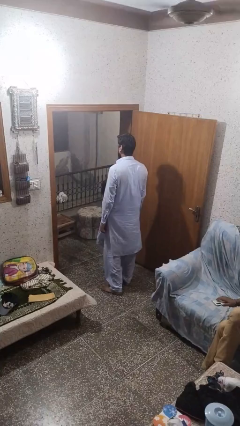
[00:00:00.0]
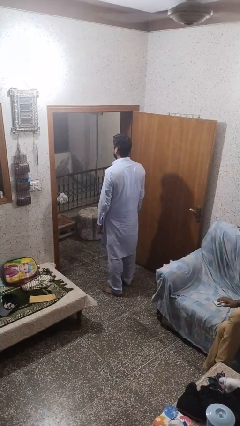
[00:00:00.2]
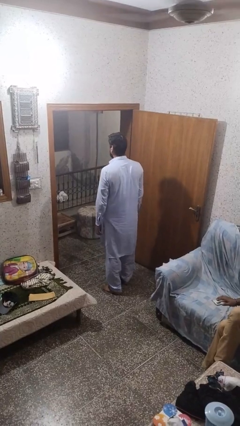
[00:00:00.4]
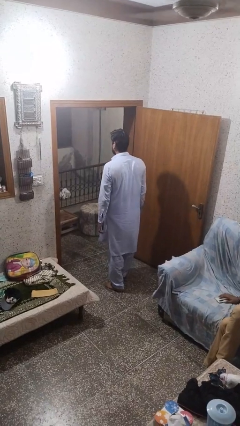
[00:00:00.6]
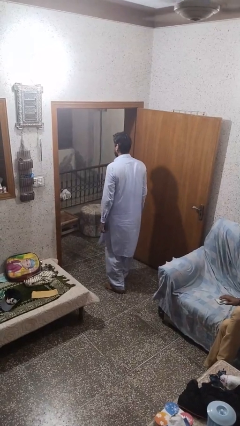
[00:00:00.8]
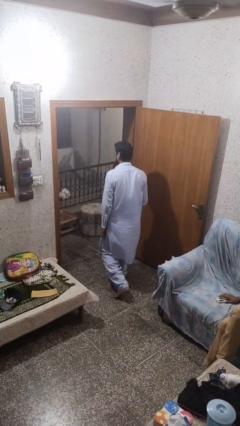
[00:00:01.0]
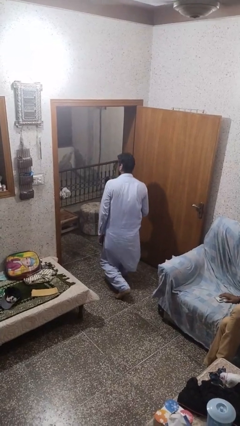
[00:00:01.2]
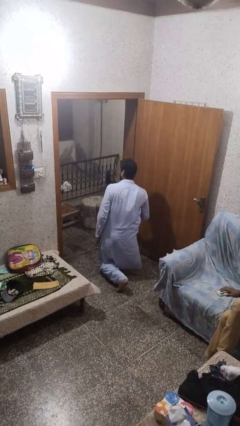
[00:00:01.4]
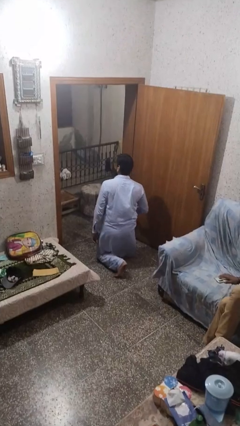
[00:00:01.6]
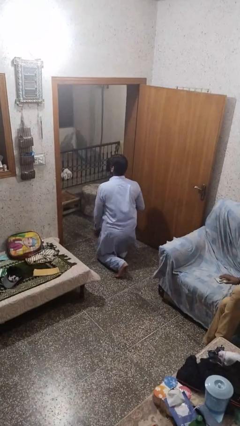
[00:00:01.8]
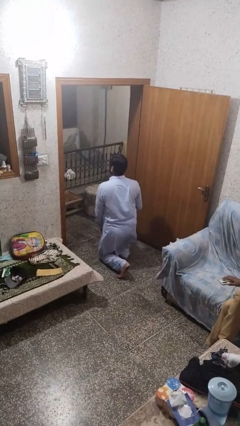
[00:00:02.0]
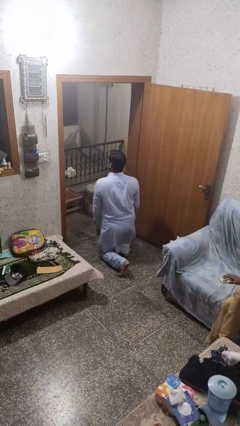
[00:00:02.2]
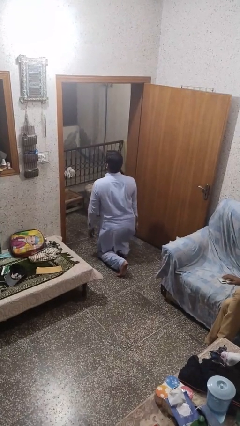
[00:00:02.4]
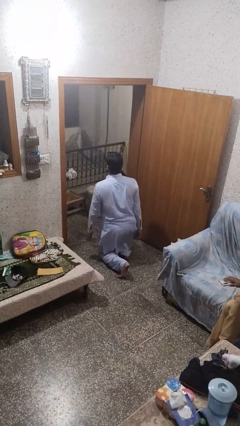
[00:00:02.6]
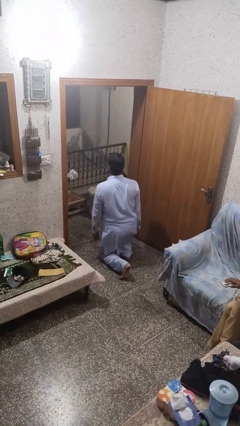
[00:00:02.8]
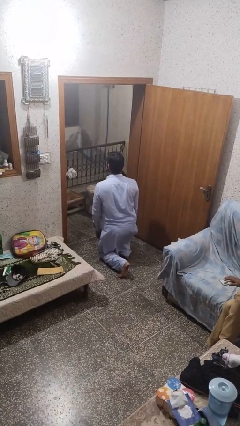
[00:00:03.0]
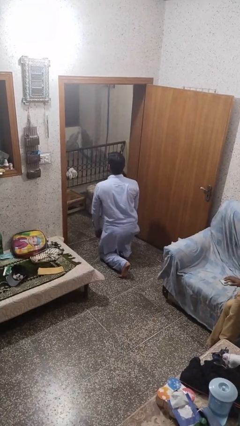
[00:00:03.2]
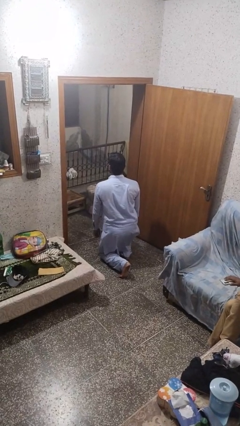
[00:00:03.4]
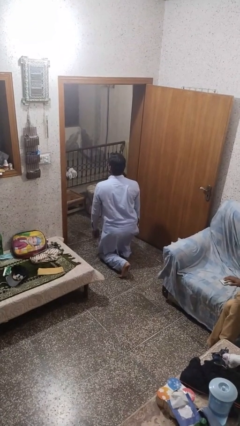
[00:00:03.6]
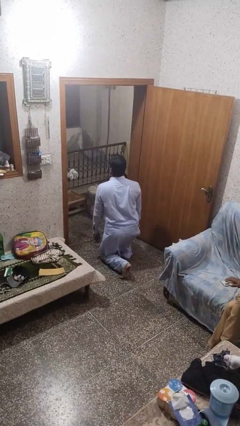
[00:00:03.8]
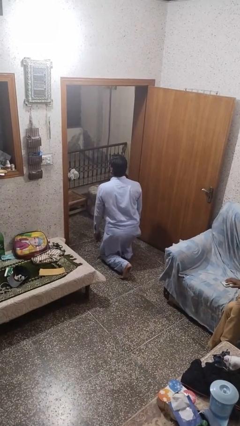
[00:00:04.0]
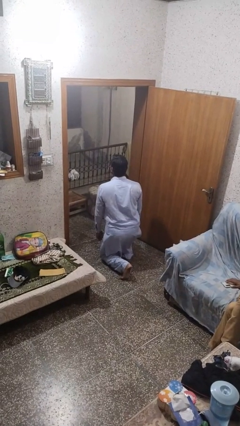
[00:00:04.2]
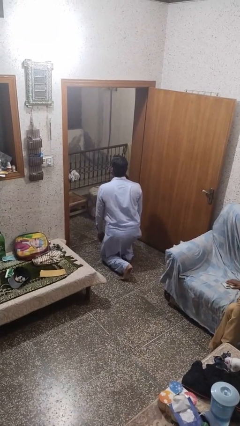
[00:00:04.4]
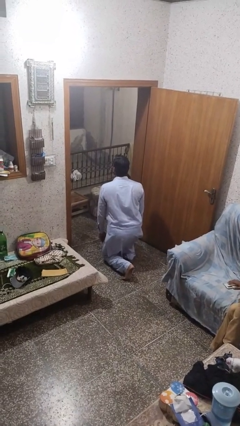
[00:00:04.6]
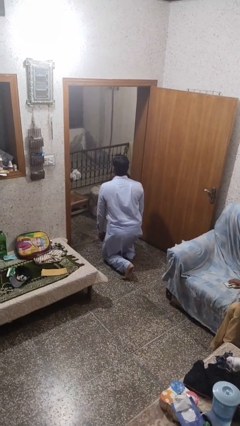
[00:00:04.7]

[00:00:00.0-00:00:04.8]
person kneels

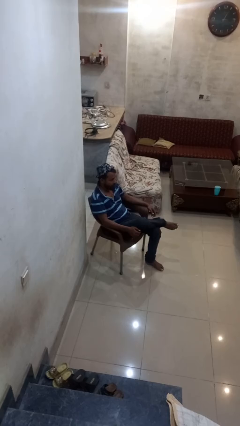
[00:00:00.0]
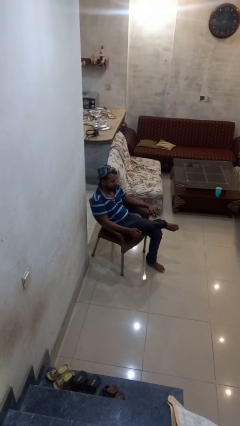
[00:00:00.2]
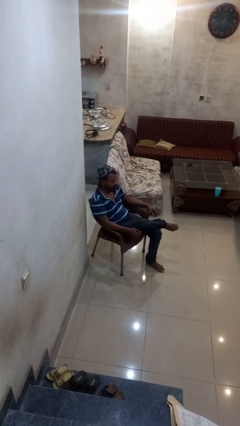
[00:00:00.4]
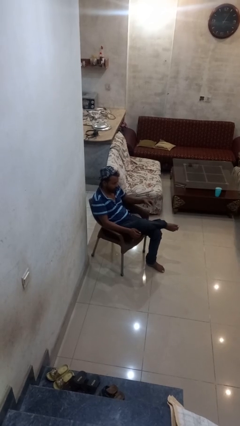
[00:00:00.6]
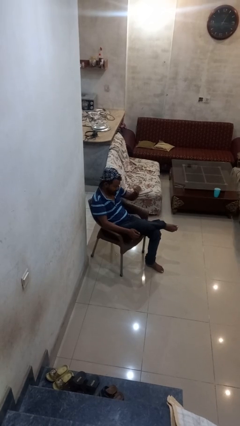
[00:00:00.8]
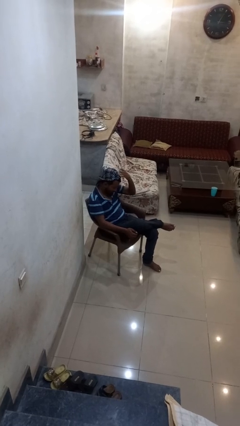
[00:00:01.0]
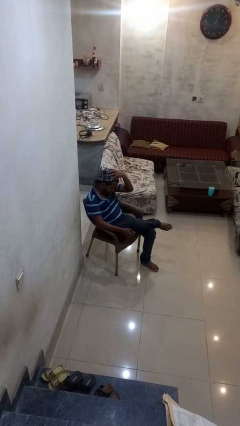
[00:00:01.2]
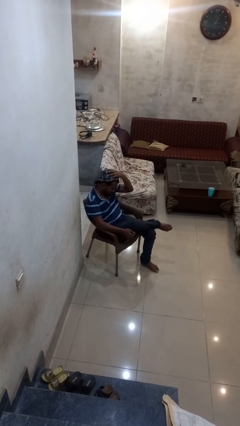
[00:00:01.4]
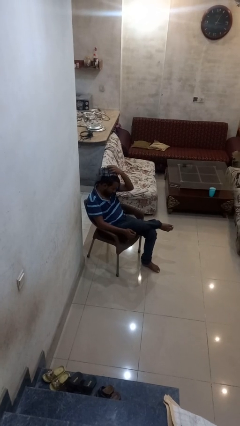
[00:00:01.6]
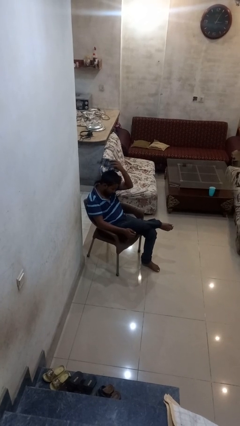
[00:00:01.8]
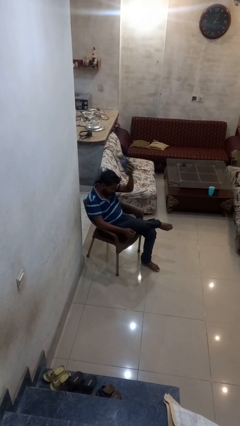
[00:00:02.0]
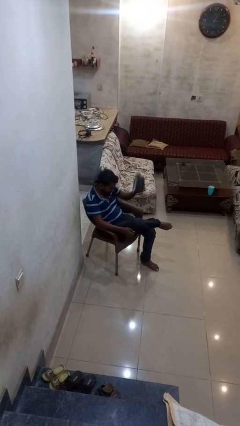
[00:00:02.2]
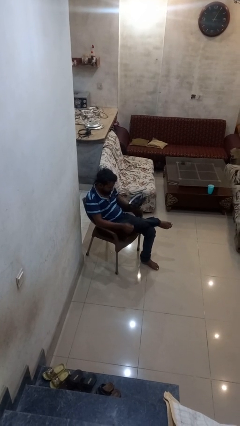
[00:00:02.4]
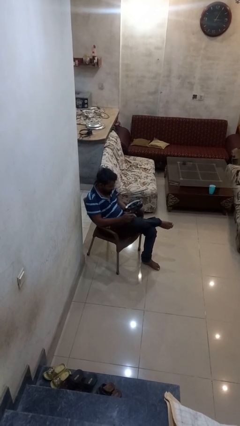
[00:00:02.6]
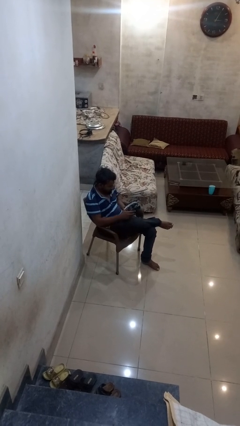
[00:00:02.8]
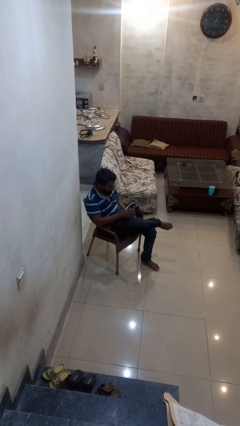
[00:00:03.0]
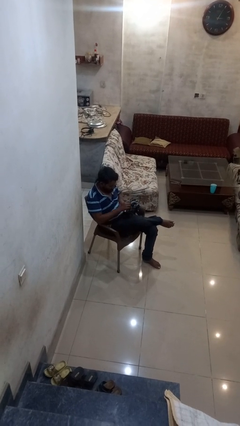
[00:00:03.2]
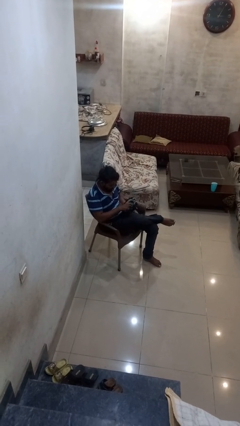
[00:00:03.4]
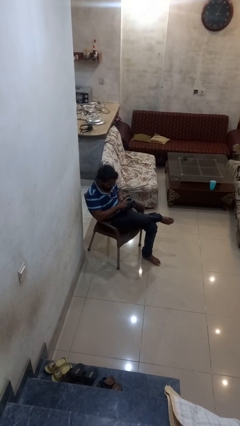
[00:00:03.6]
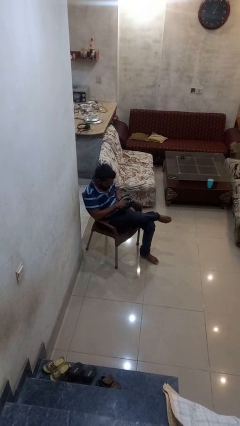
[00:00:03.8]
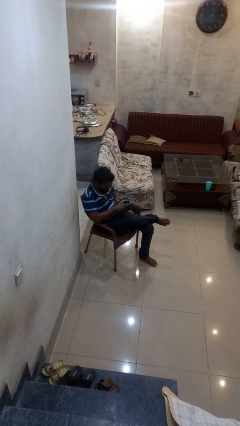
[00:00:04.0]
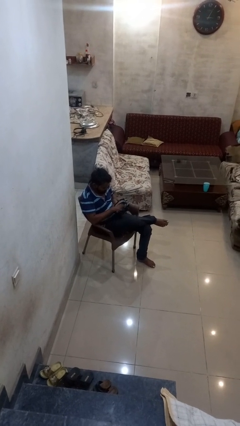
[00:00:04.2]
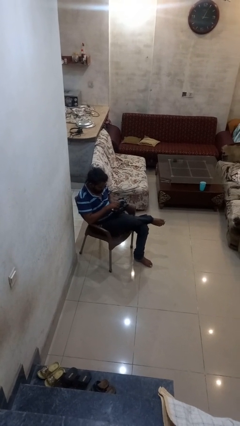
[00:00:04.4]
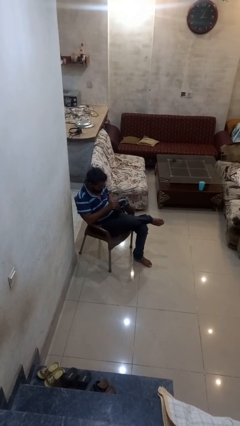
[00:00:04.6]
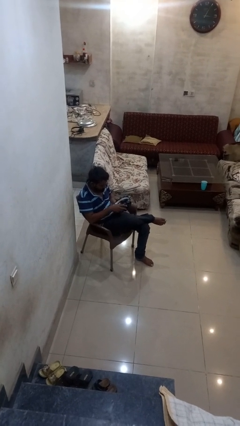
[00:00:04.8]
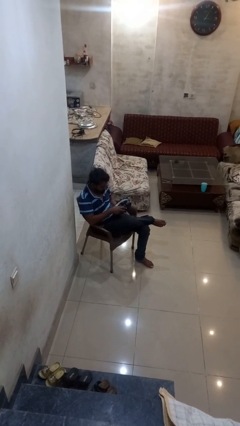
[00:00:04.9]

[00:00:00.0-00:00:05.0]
person takes off hat

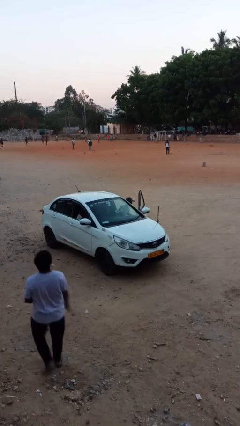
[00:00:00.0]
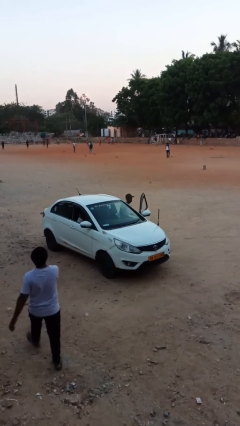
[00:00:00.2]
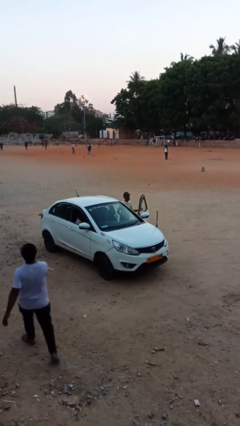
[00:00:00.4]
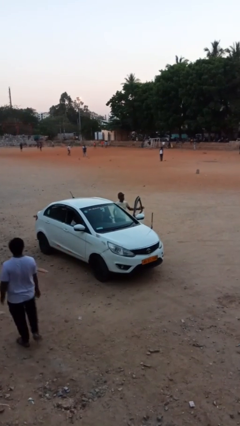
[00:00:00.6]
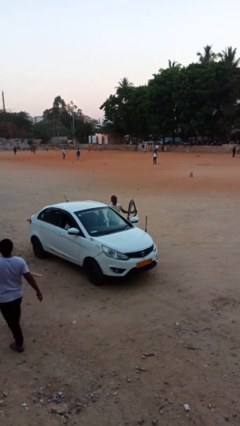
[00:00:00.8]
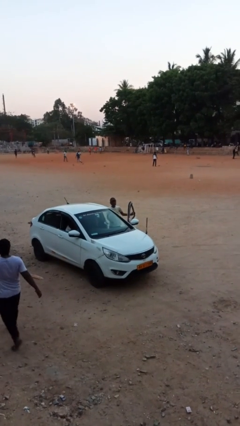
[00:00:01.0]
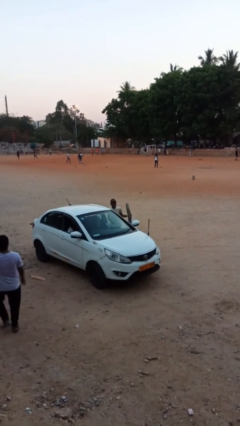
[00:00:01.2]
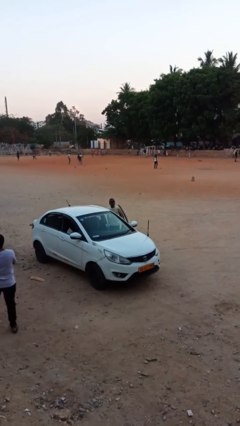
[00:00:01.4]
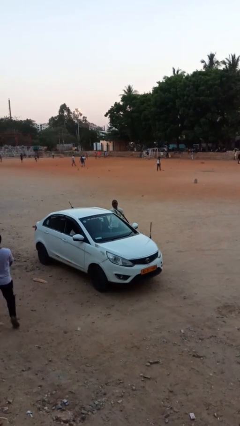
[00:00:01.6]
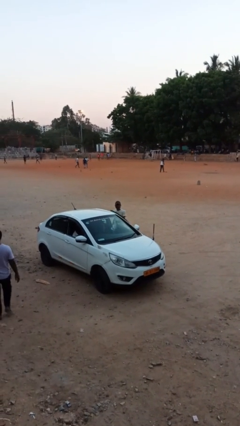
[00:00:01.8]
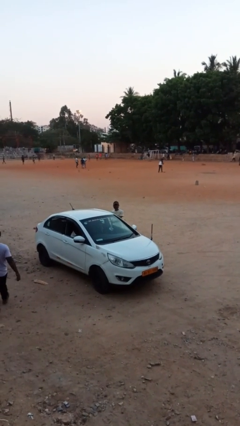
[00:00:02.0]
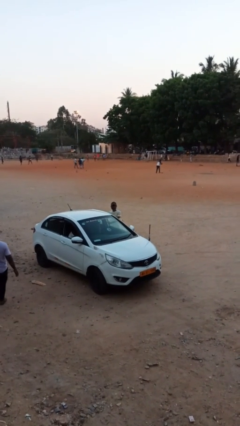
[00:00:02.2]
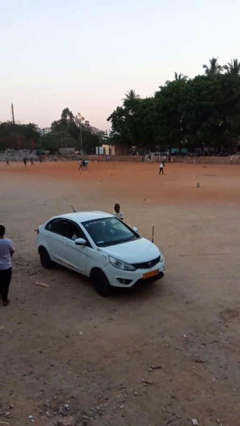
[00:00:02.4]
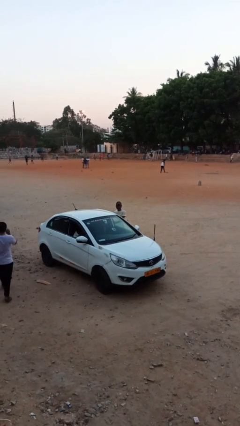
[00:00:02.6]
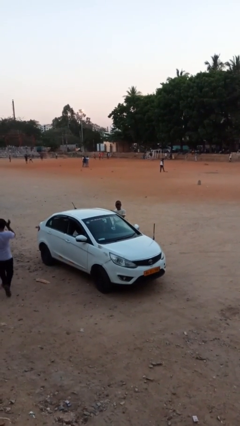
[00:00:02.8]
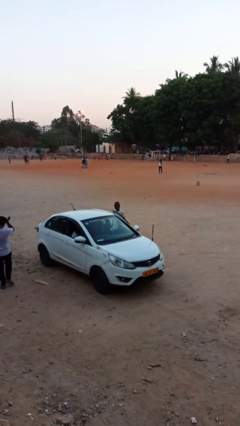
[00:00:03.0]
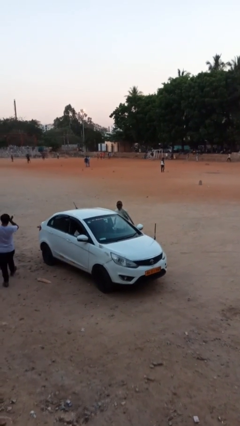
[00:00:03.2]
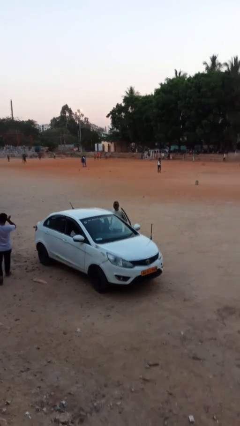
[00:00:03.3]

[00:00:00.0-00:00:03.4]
person exits car

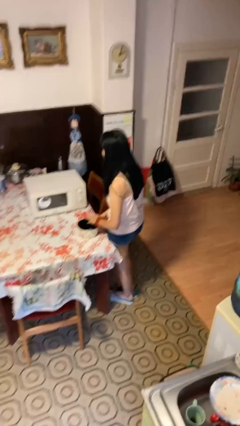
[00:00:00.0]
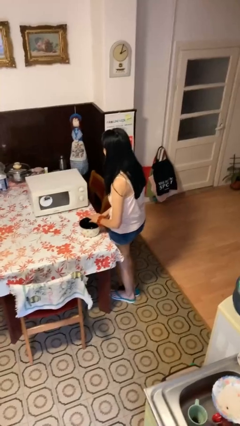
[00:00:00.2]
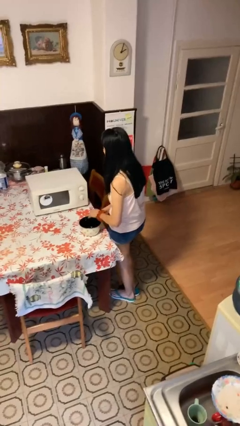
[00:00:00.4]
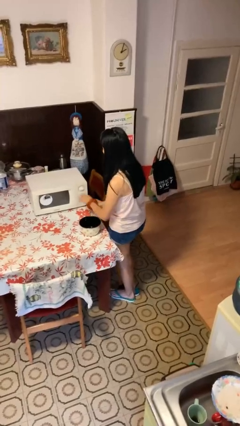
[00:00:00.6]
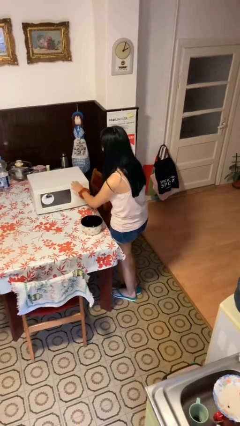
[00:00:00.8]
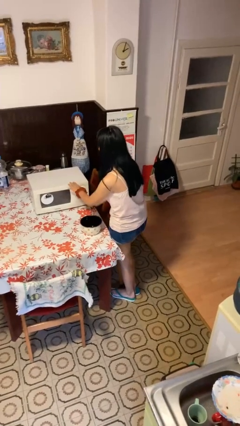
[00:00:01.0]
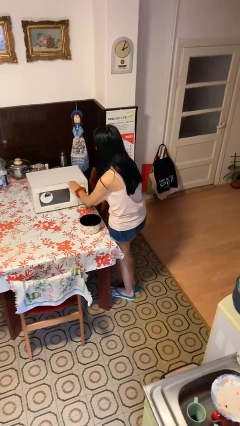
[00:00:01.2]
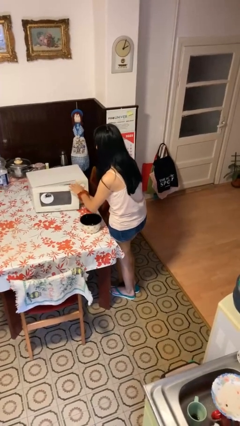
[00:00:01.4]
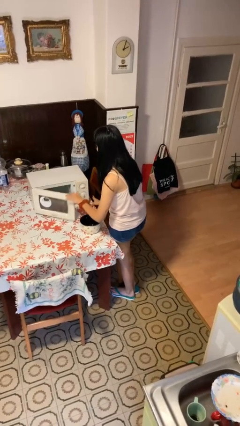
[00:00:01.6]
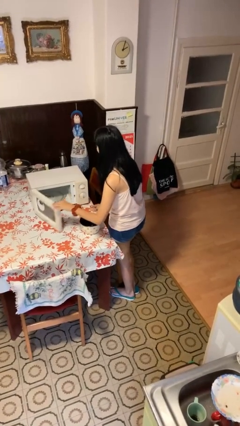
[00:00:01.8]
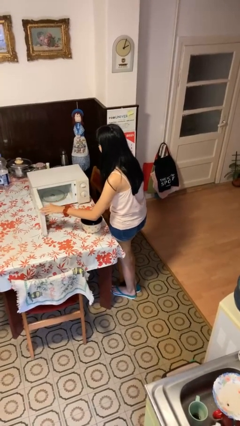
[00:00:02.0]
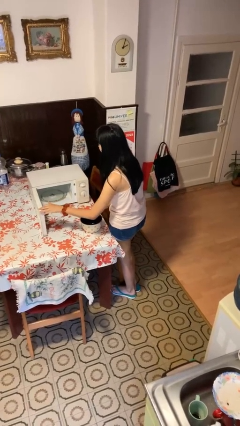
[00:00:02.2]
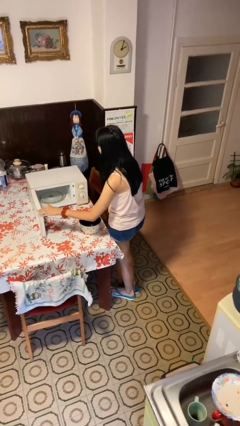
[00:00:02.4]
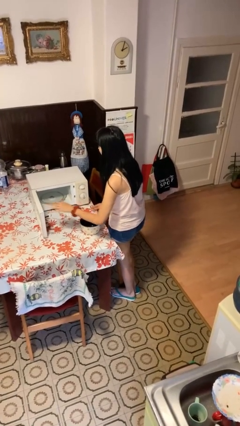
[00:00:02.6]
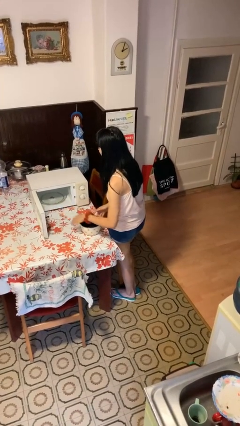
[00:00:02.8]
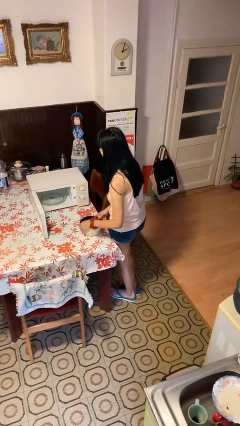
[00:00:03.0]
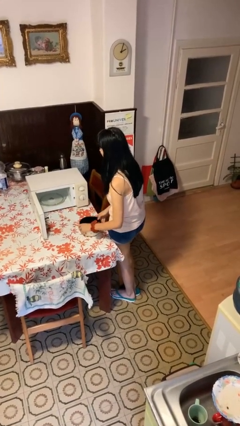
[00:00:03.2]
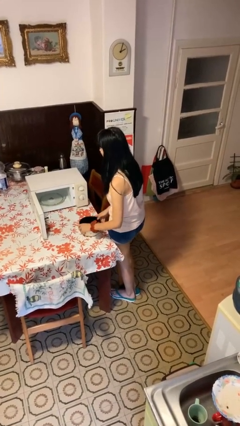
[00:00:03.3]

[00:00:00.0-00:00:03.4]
person opens microwave

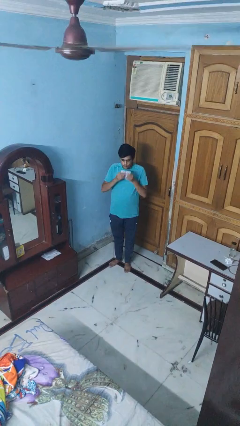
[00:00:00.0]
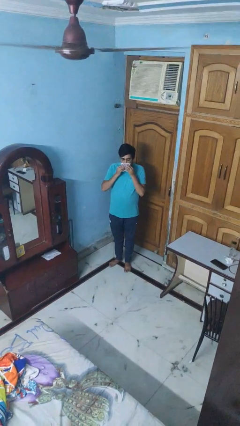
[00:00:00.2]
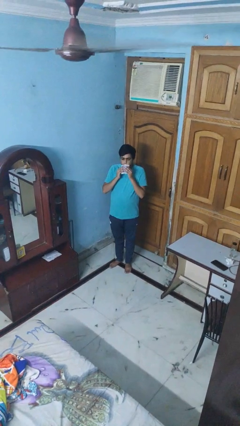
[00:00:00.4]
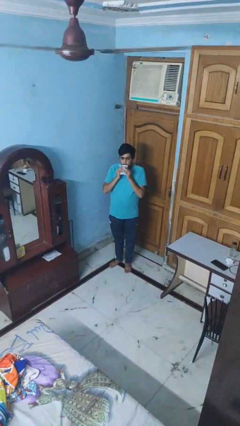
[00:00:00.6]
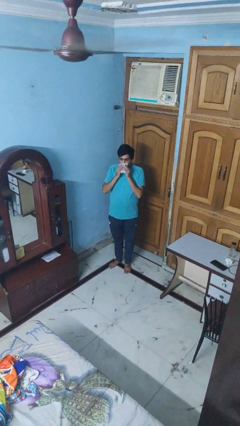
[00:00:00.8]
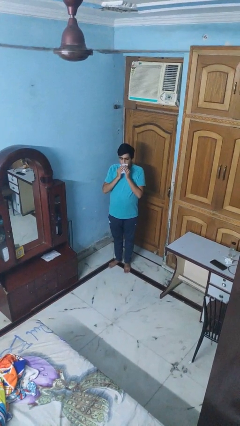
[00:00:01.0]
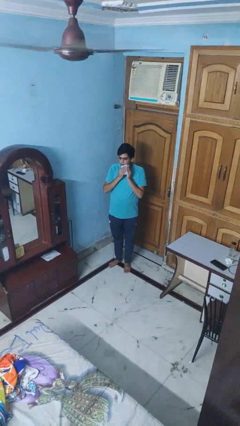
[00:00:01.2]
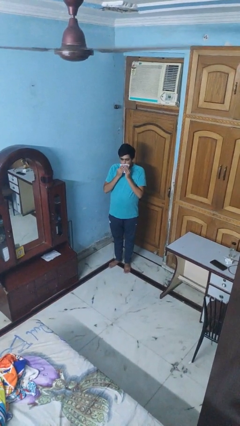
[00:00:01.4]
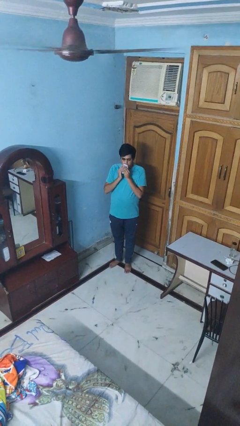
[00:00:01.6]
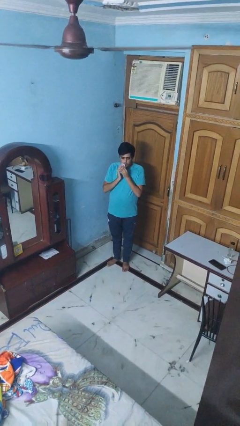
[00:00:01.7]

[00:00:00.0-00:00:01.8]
person wipes mouth with napkin
